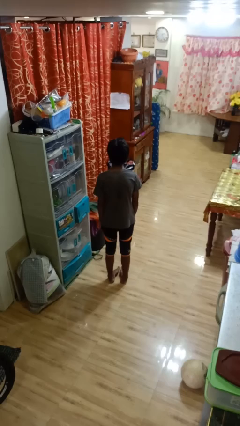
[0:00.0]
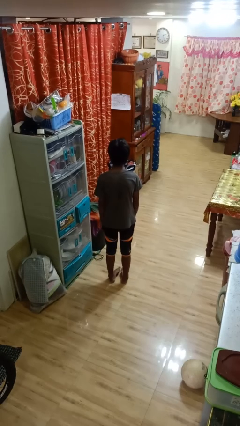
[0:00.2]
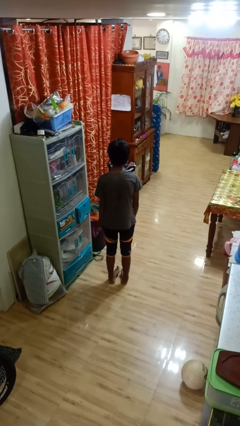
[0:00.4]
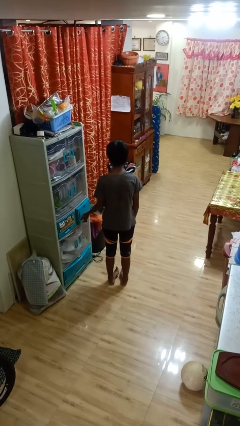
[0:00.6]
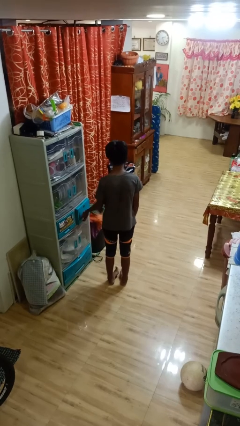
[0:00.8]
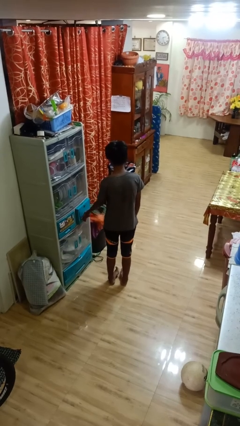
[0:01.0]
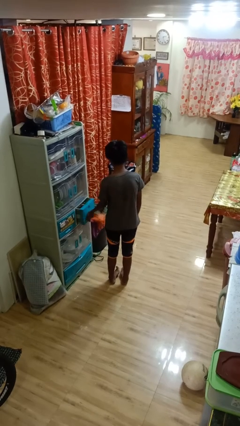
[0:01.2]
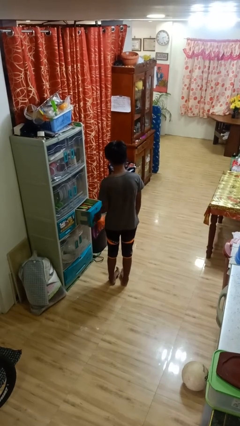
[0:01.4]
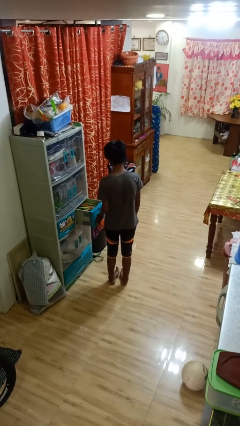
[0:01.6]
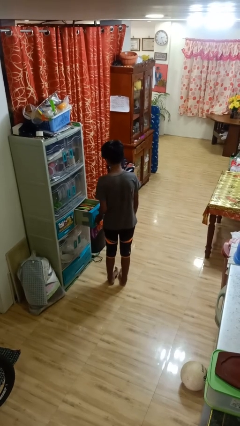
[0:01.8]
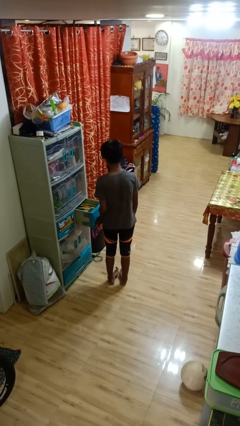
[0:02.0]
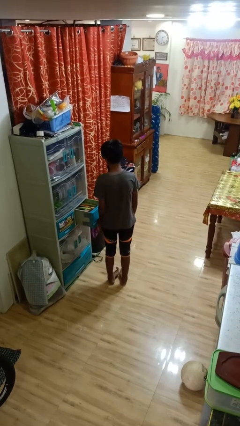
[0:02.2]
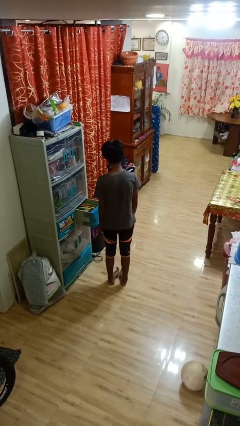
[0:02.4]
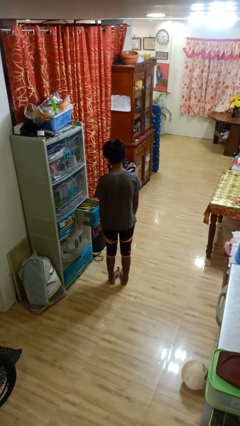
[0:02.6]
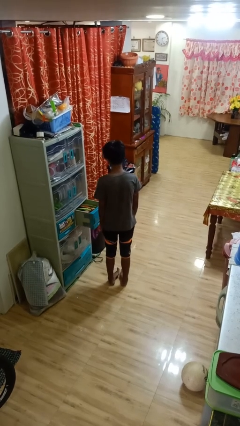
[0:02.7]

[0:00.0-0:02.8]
person opens kitchen drawer

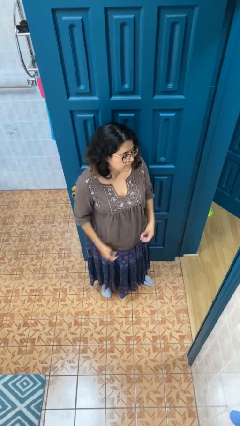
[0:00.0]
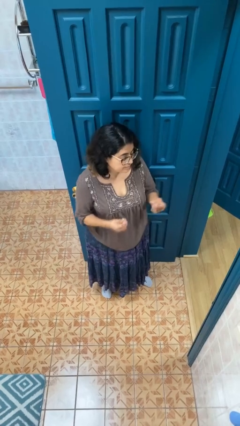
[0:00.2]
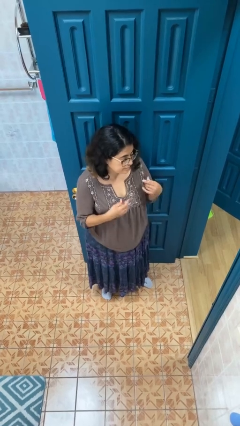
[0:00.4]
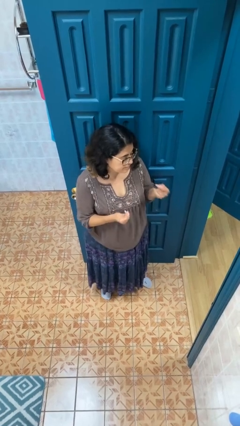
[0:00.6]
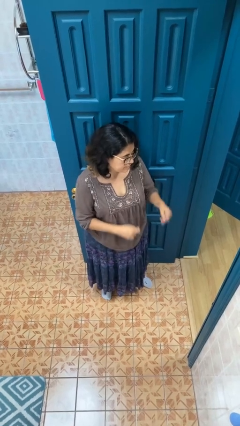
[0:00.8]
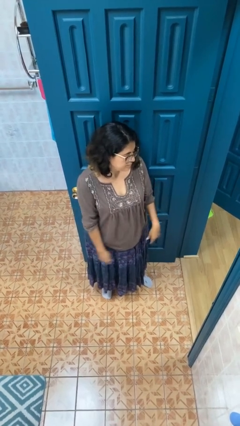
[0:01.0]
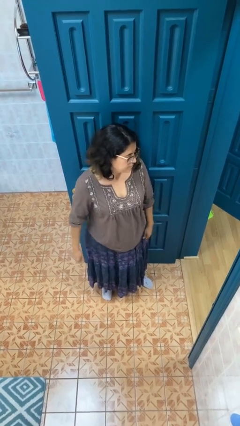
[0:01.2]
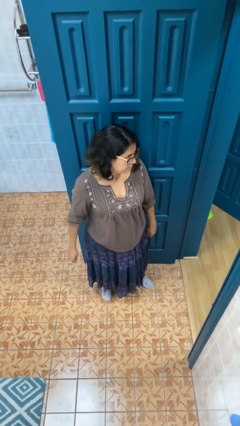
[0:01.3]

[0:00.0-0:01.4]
person snaps fingers

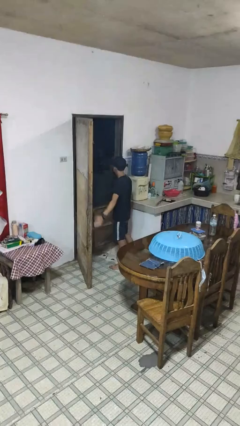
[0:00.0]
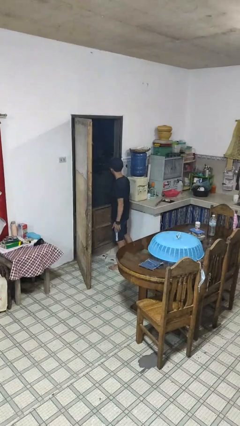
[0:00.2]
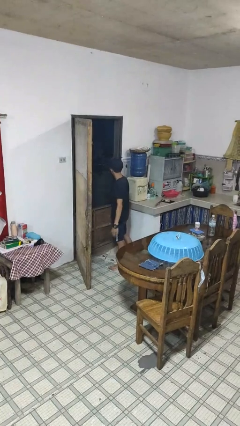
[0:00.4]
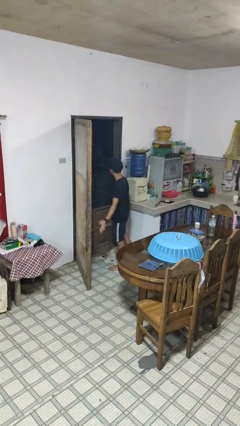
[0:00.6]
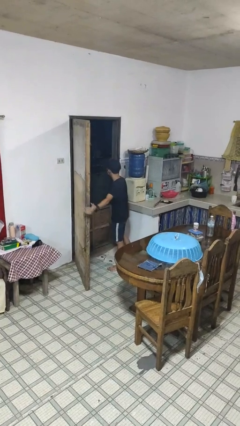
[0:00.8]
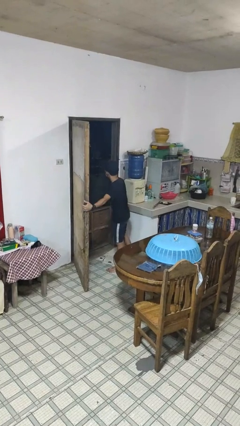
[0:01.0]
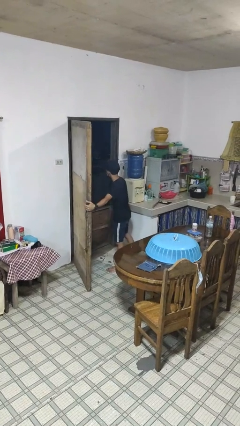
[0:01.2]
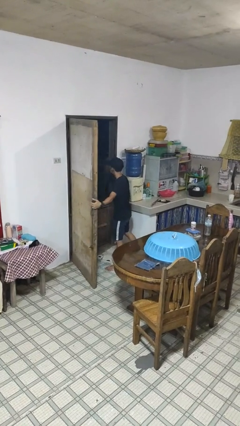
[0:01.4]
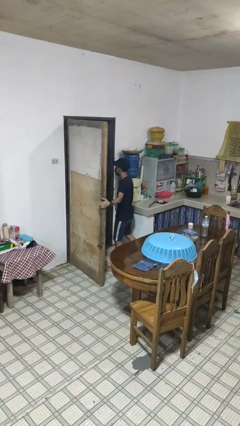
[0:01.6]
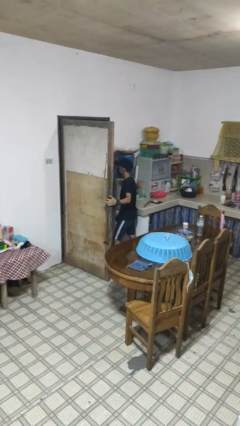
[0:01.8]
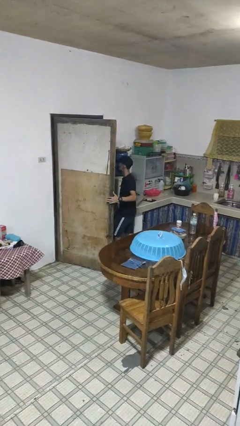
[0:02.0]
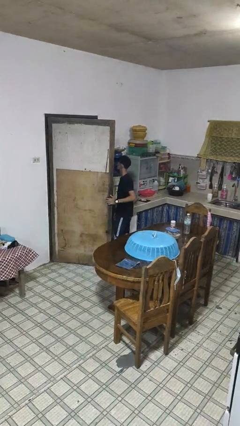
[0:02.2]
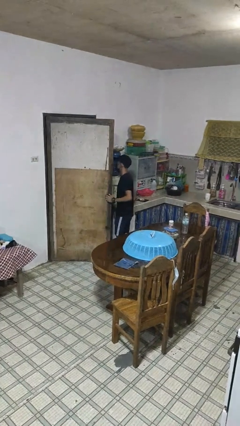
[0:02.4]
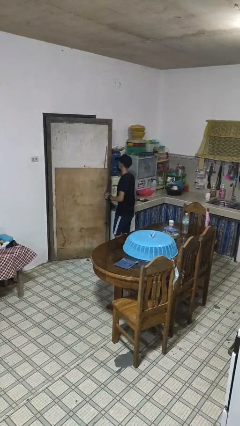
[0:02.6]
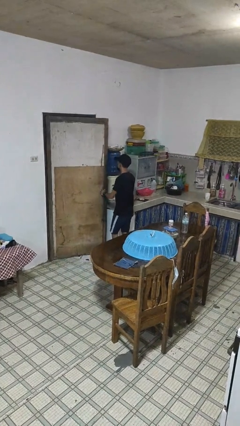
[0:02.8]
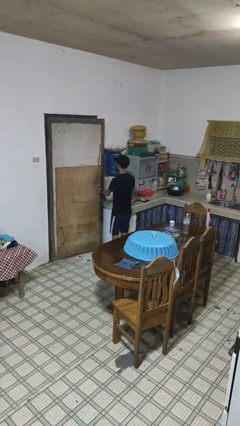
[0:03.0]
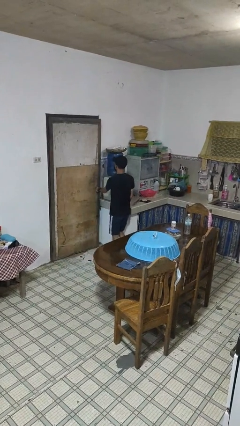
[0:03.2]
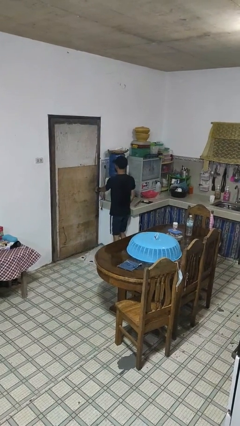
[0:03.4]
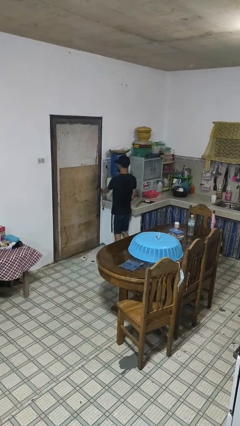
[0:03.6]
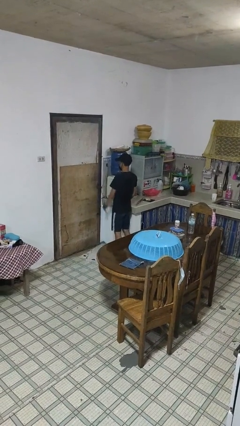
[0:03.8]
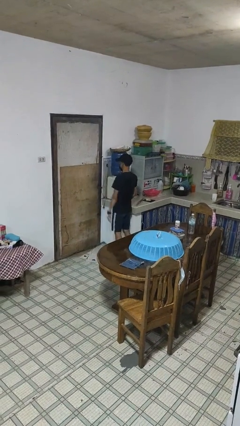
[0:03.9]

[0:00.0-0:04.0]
person closes facility door

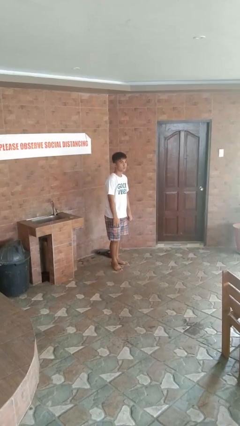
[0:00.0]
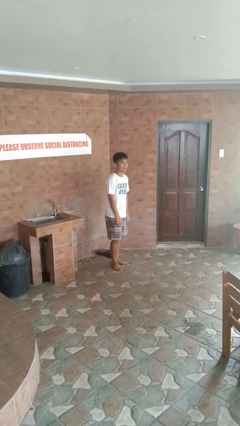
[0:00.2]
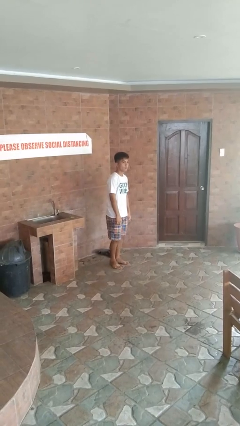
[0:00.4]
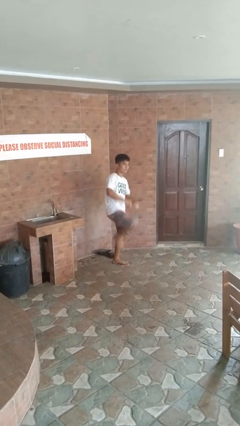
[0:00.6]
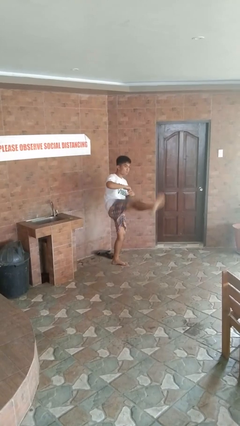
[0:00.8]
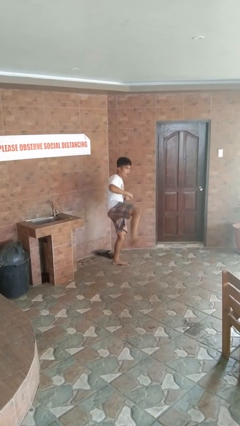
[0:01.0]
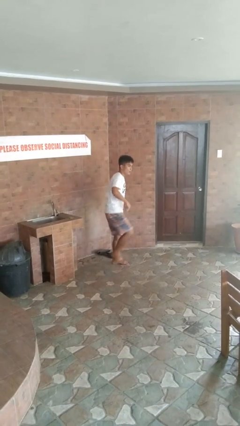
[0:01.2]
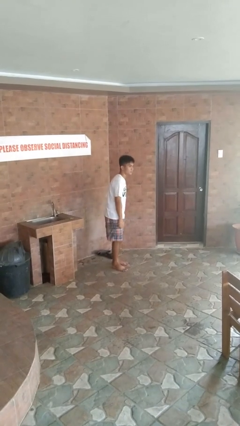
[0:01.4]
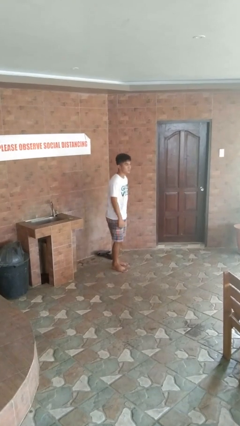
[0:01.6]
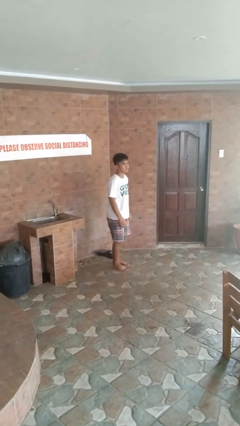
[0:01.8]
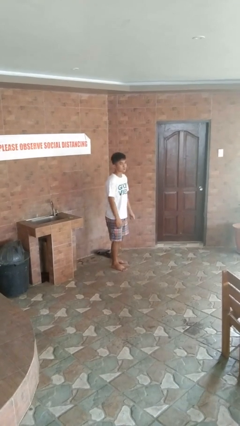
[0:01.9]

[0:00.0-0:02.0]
person karate kicks

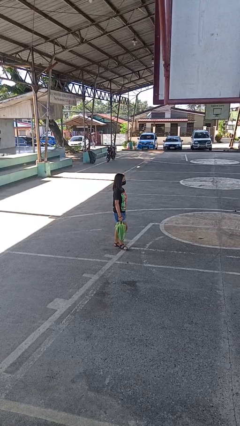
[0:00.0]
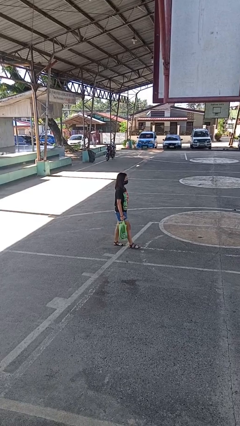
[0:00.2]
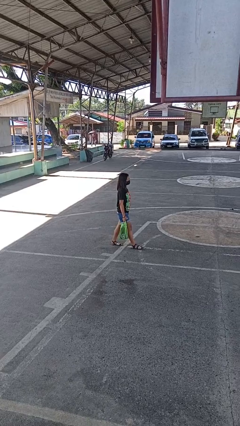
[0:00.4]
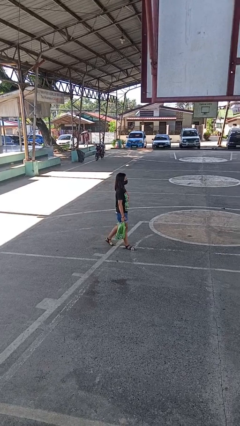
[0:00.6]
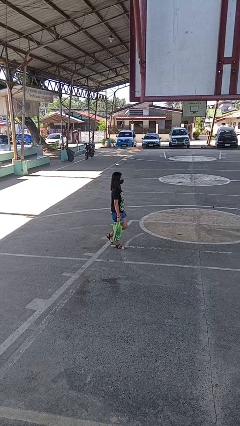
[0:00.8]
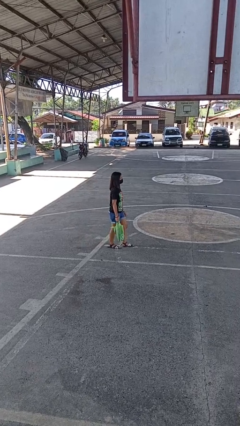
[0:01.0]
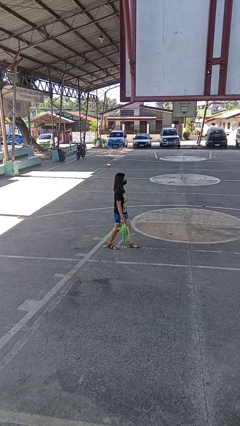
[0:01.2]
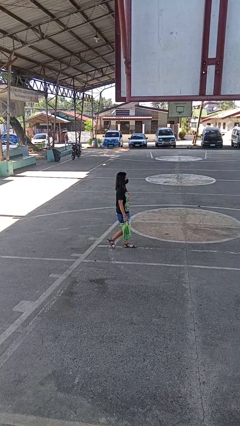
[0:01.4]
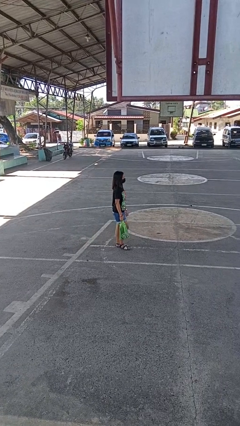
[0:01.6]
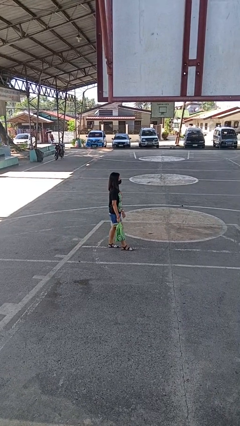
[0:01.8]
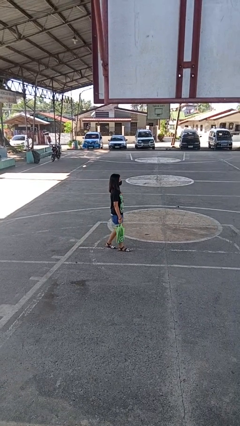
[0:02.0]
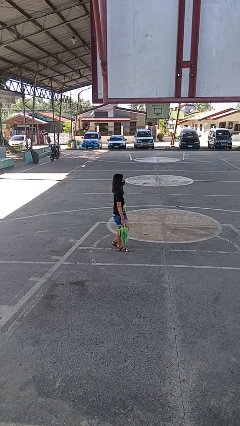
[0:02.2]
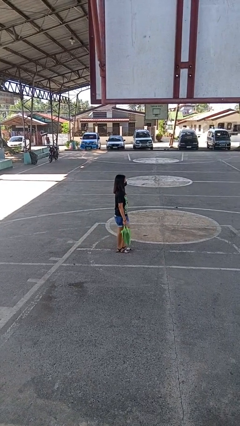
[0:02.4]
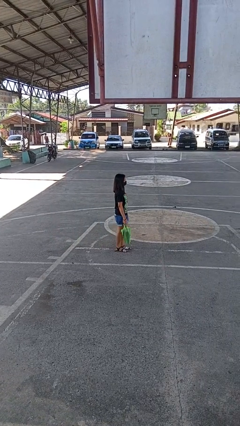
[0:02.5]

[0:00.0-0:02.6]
person carries groceries

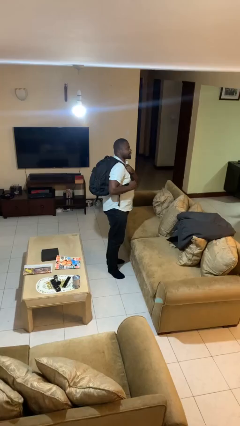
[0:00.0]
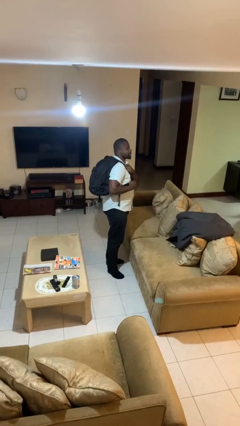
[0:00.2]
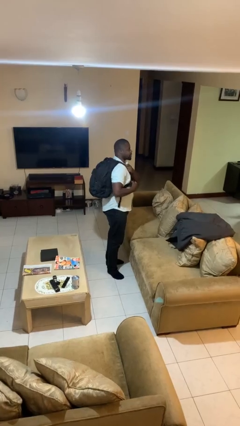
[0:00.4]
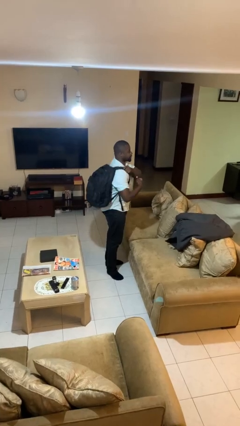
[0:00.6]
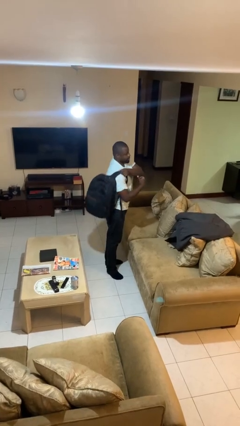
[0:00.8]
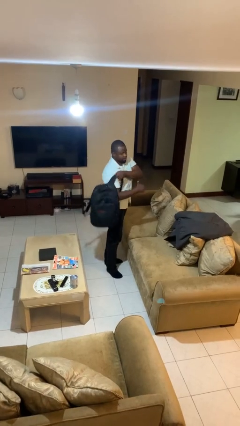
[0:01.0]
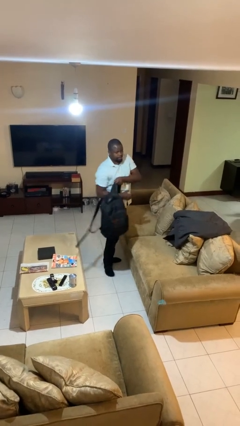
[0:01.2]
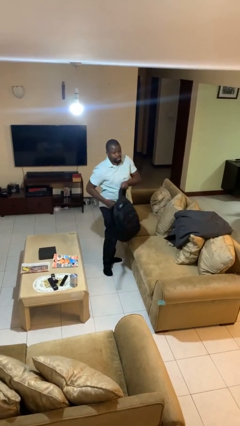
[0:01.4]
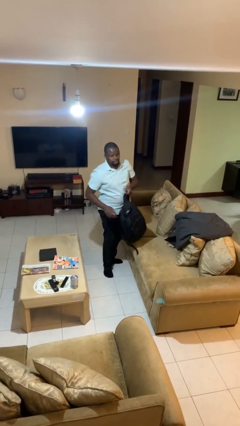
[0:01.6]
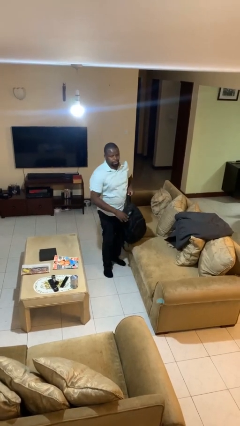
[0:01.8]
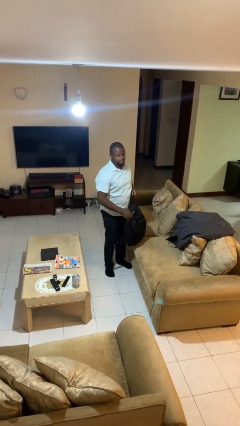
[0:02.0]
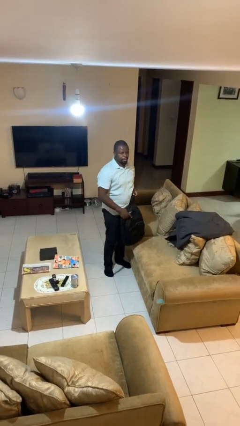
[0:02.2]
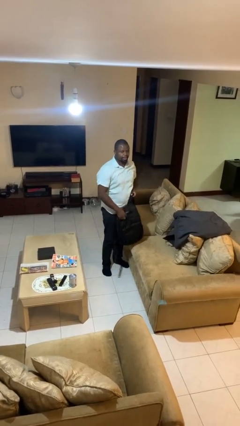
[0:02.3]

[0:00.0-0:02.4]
person takes off backpack

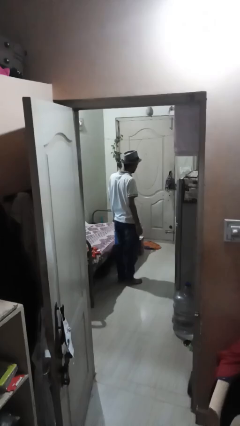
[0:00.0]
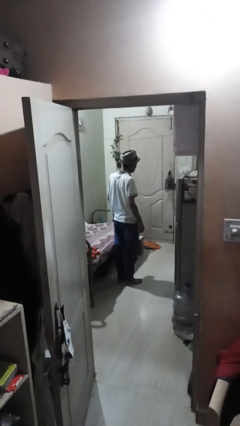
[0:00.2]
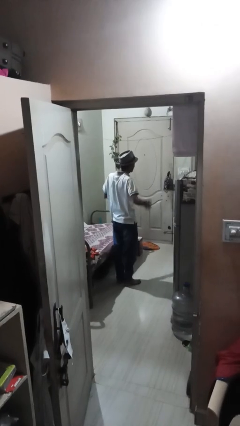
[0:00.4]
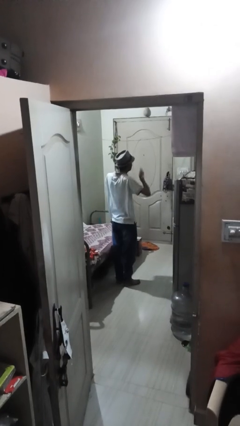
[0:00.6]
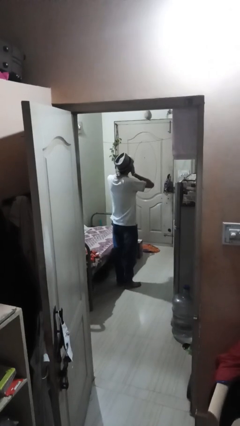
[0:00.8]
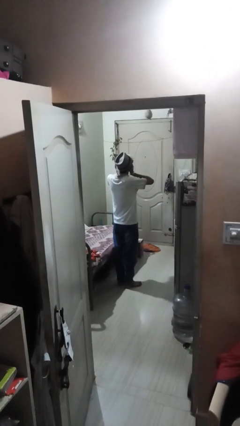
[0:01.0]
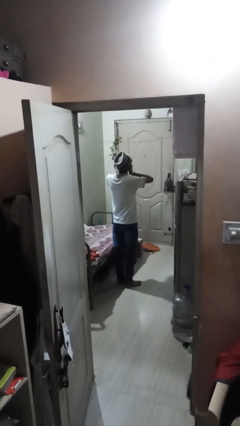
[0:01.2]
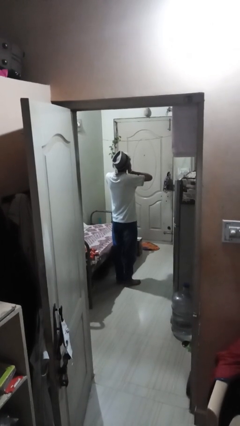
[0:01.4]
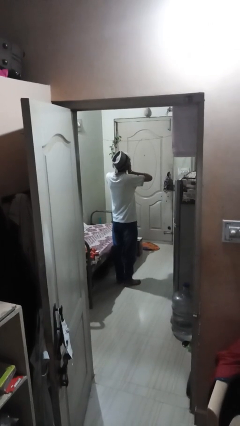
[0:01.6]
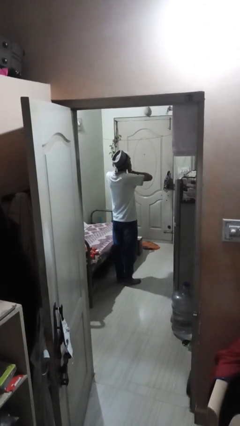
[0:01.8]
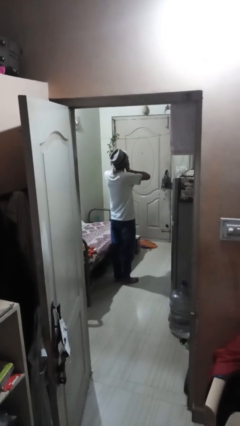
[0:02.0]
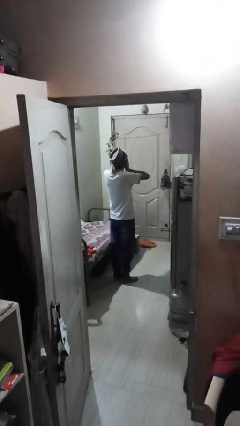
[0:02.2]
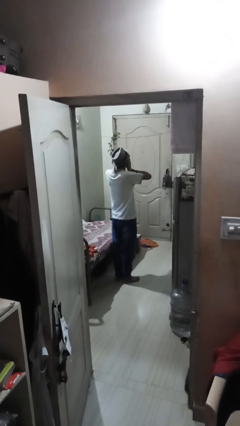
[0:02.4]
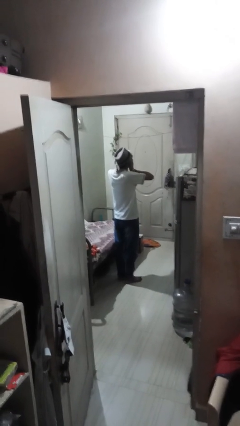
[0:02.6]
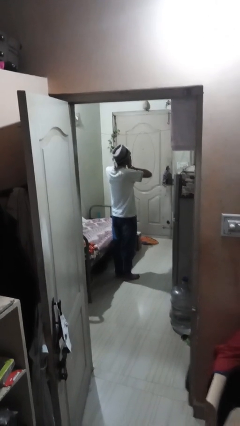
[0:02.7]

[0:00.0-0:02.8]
person covers face with hands
